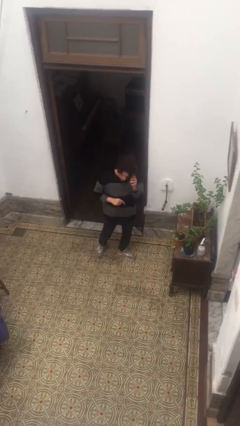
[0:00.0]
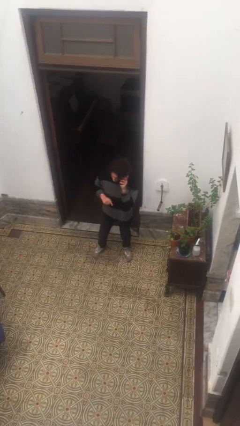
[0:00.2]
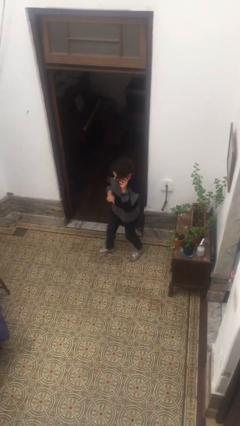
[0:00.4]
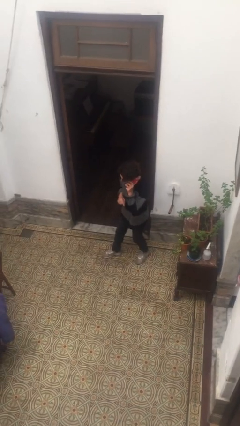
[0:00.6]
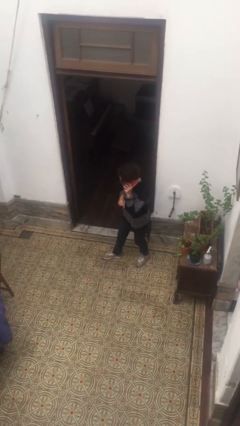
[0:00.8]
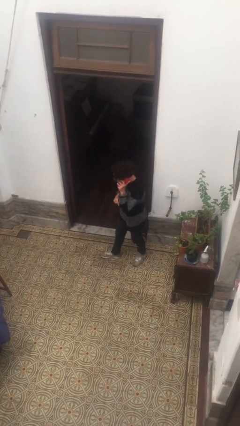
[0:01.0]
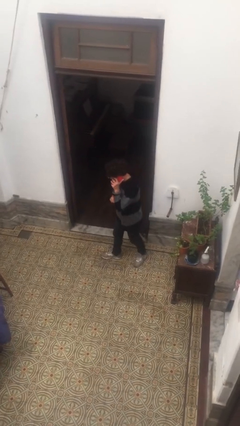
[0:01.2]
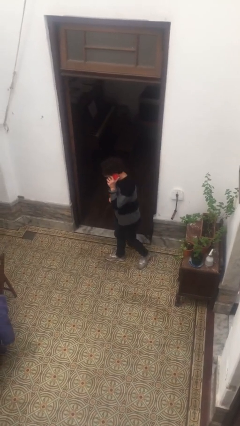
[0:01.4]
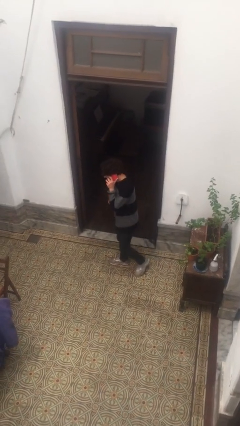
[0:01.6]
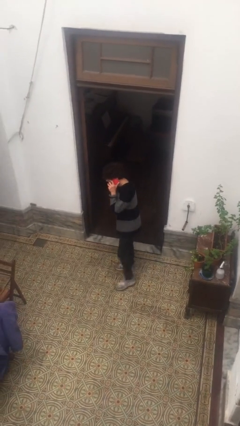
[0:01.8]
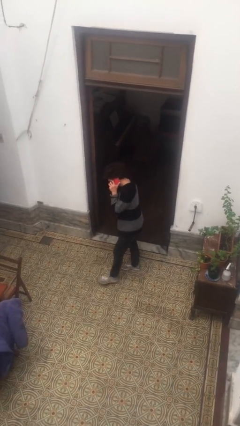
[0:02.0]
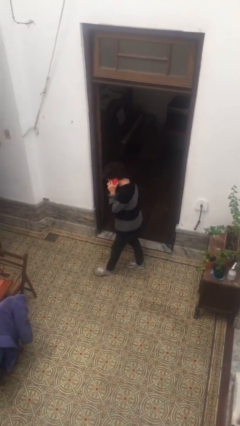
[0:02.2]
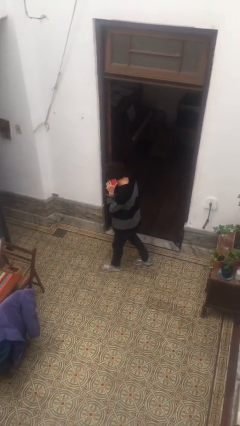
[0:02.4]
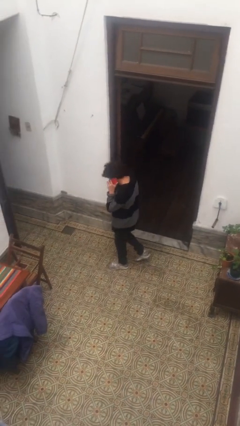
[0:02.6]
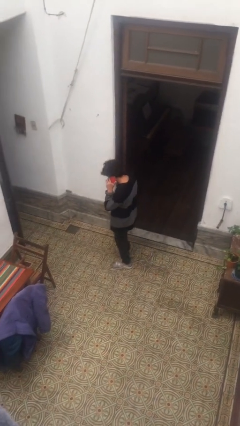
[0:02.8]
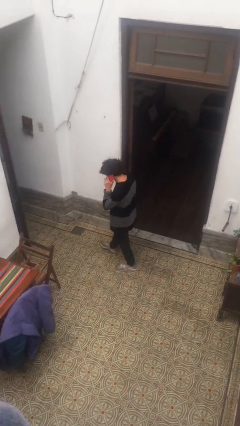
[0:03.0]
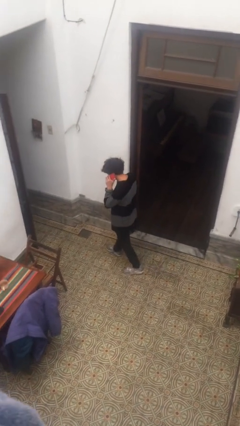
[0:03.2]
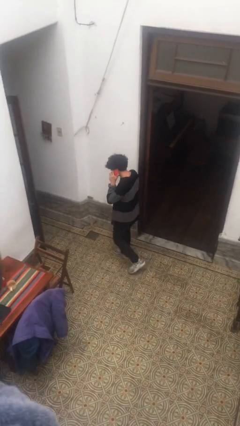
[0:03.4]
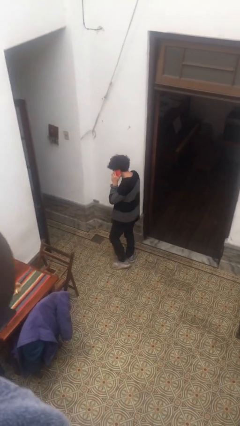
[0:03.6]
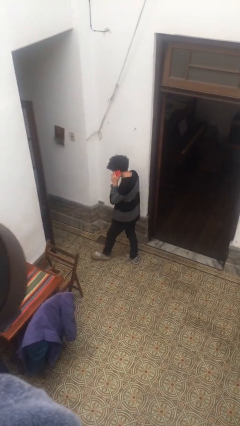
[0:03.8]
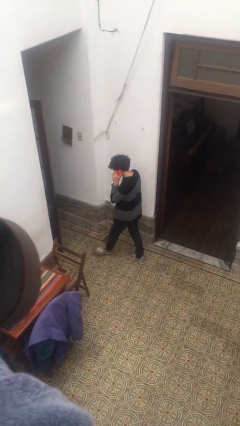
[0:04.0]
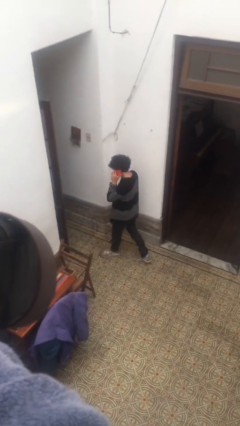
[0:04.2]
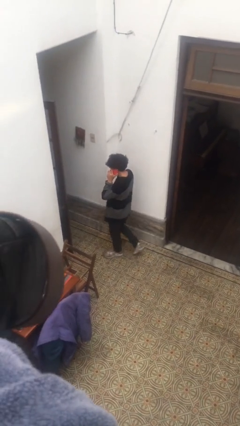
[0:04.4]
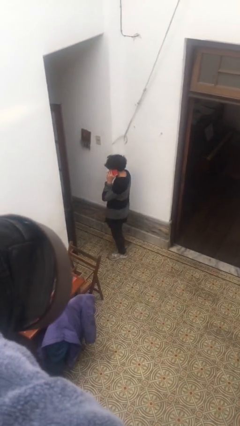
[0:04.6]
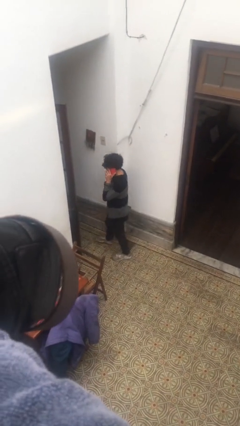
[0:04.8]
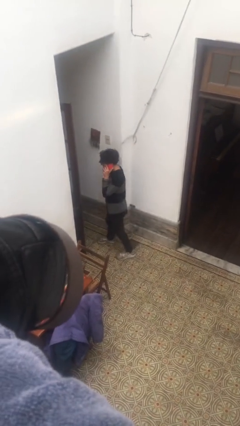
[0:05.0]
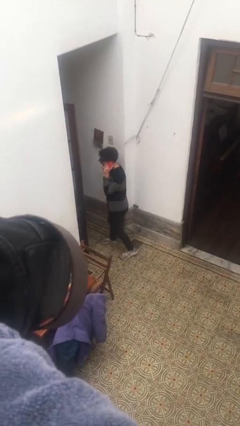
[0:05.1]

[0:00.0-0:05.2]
person talks on phone

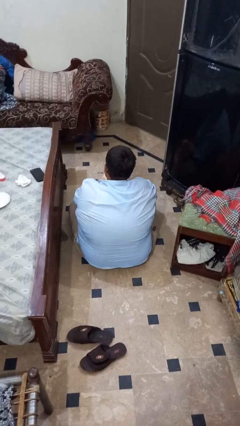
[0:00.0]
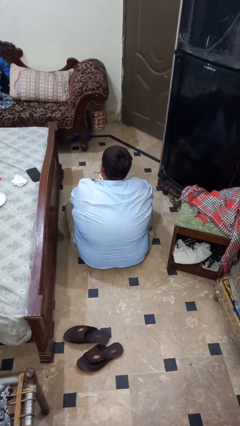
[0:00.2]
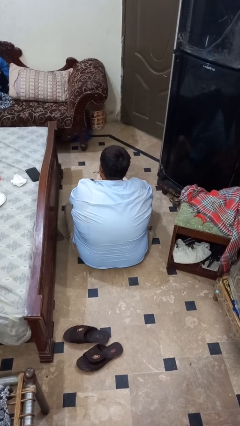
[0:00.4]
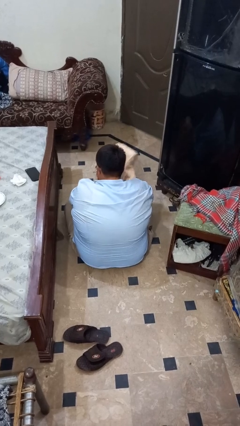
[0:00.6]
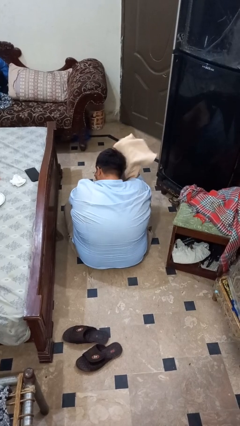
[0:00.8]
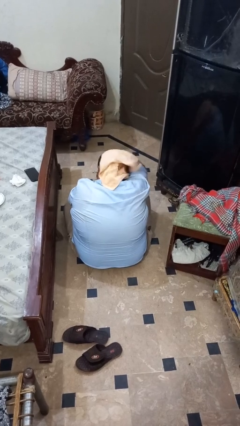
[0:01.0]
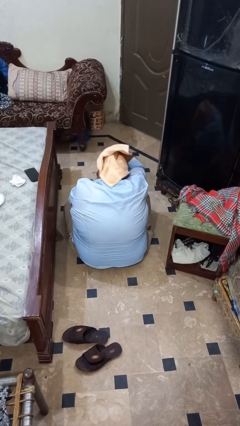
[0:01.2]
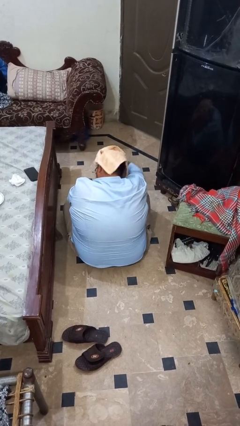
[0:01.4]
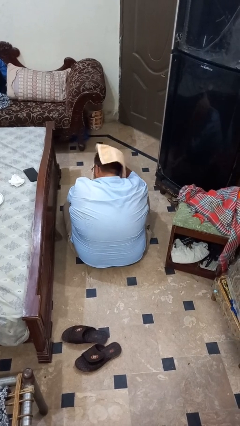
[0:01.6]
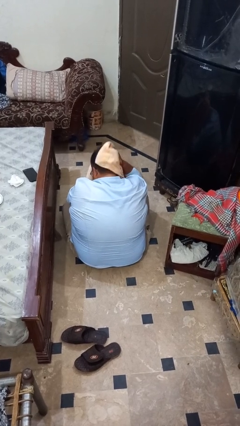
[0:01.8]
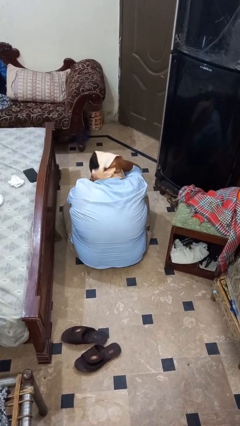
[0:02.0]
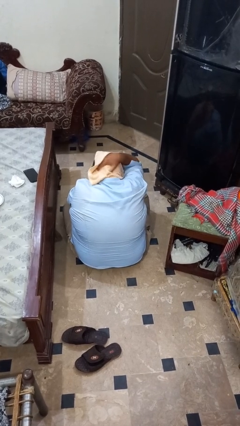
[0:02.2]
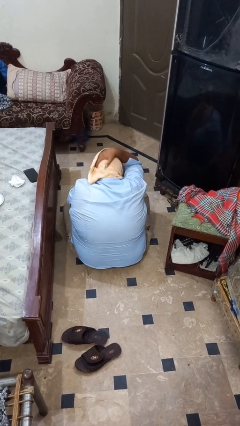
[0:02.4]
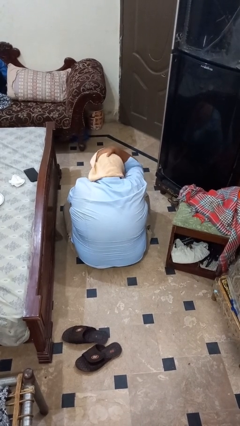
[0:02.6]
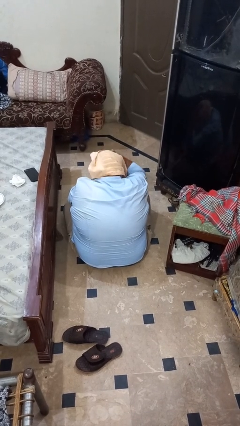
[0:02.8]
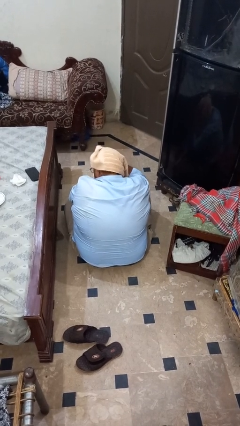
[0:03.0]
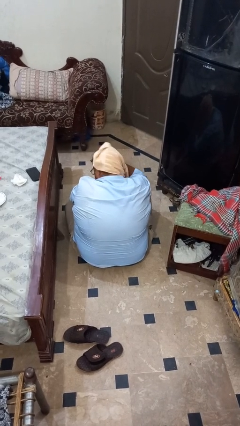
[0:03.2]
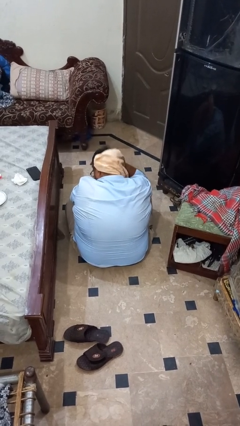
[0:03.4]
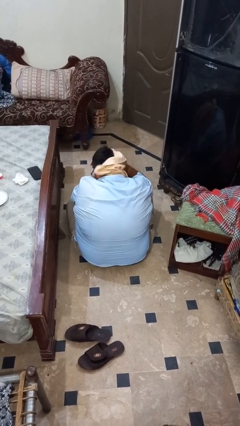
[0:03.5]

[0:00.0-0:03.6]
person dries hair with towel

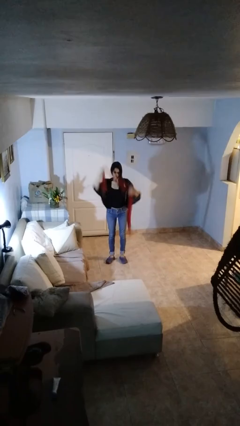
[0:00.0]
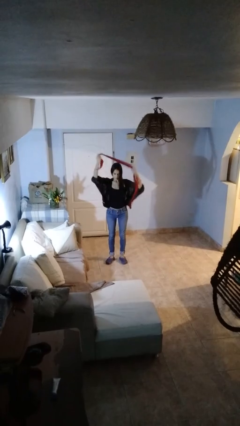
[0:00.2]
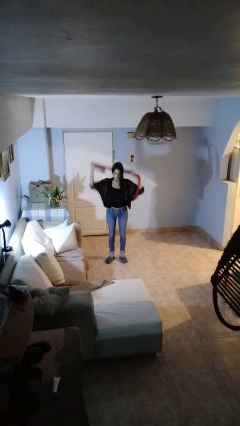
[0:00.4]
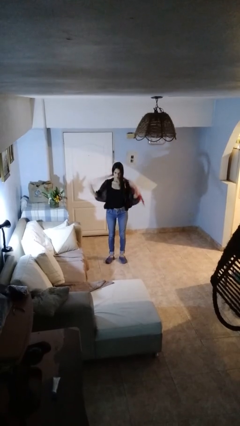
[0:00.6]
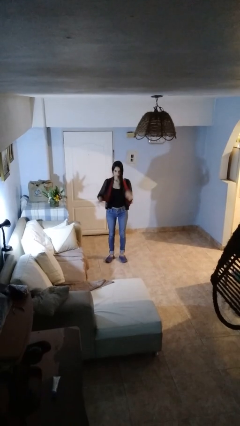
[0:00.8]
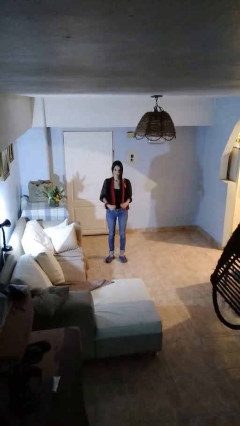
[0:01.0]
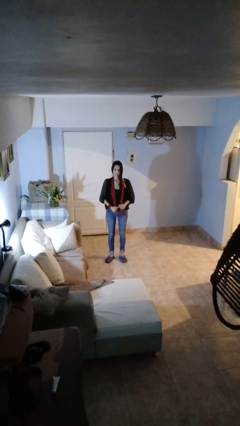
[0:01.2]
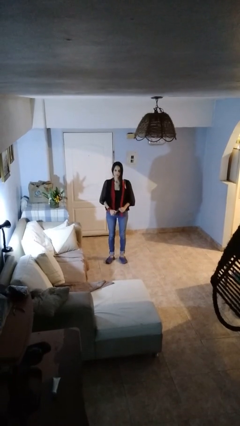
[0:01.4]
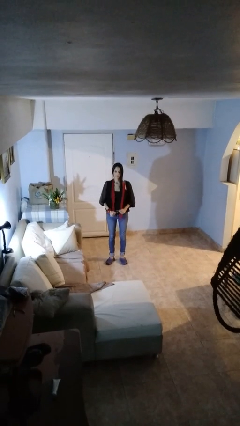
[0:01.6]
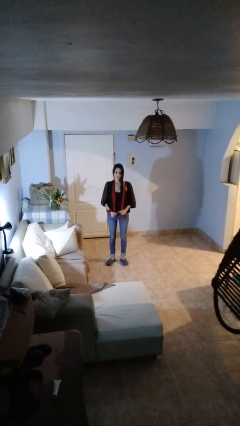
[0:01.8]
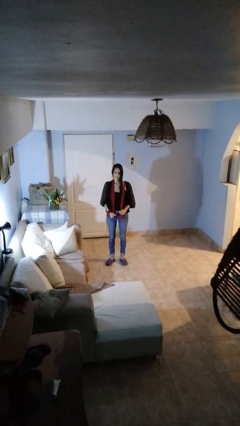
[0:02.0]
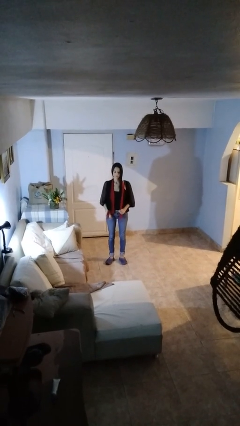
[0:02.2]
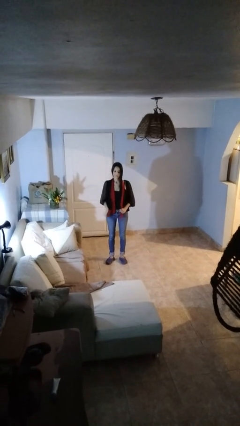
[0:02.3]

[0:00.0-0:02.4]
person puts on scarf

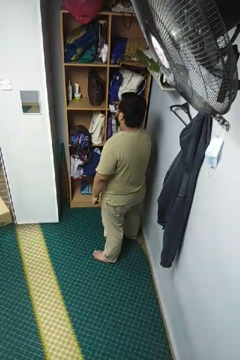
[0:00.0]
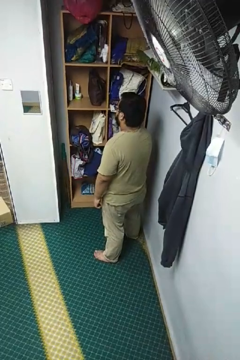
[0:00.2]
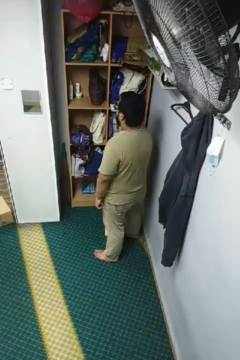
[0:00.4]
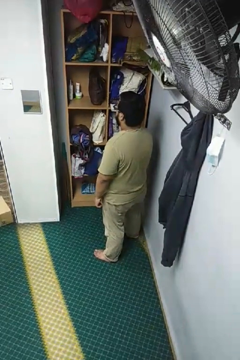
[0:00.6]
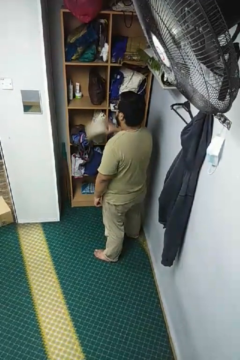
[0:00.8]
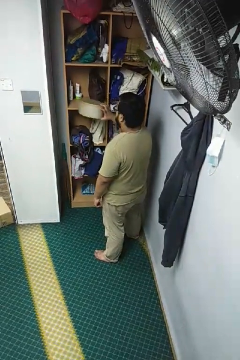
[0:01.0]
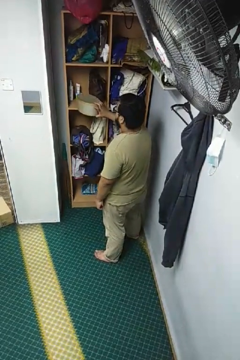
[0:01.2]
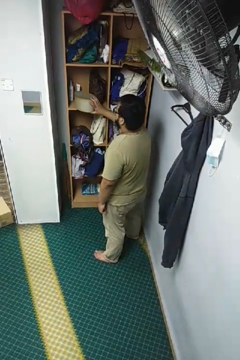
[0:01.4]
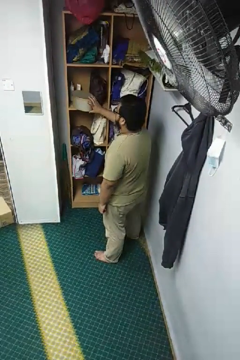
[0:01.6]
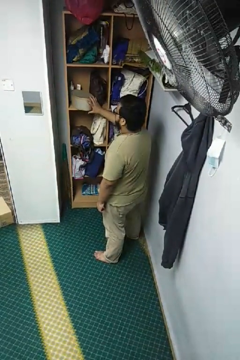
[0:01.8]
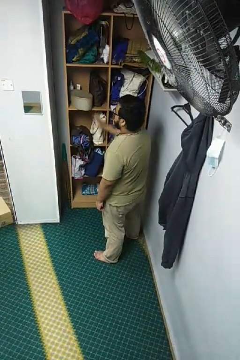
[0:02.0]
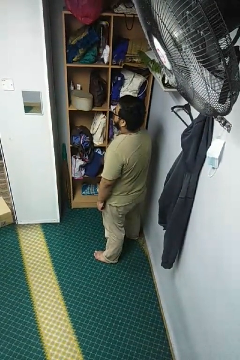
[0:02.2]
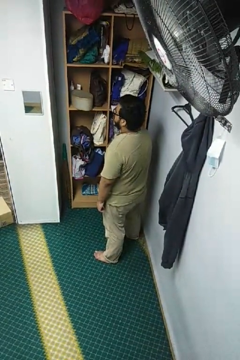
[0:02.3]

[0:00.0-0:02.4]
person puts down object into cabinet

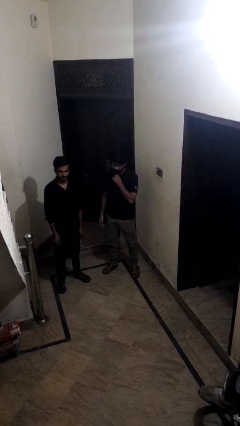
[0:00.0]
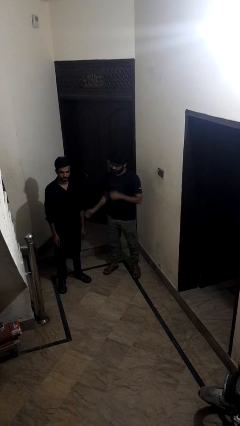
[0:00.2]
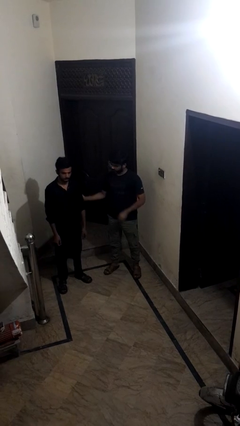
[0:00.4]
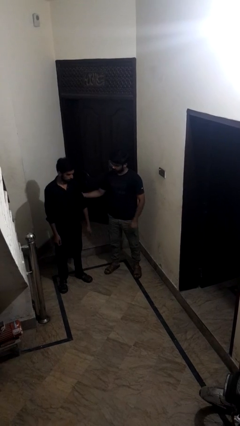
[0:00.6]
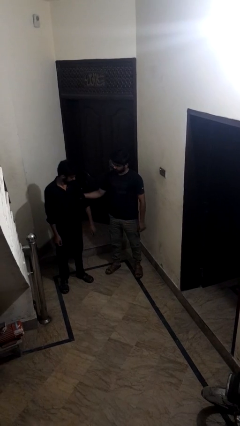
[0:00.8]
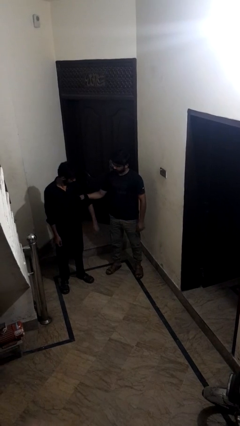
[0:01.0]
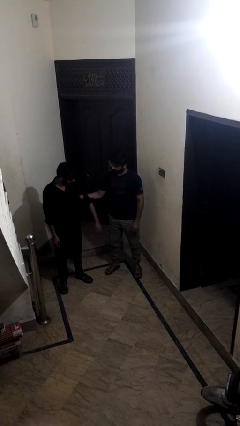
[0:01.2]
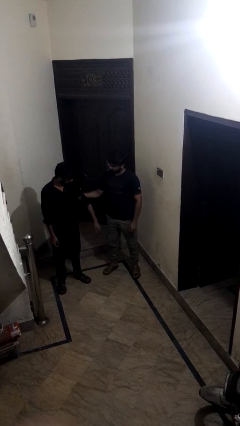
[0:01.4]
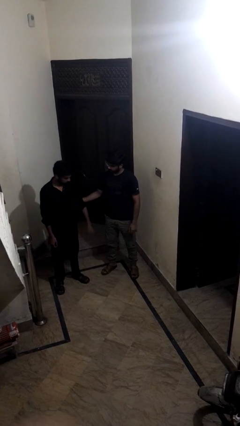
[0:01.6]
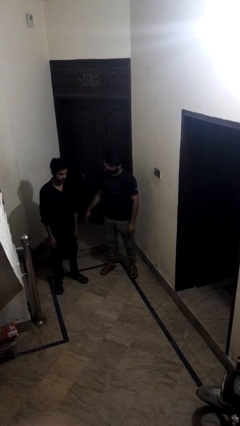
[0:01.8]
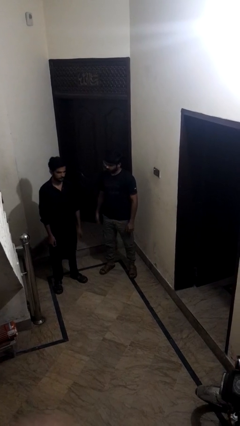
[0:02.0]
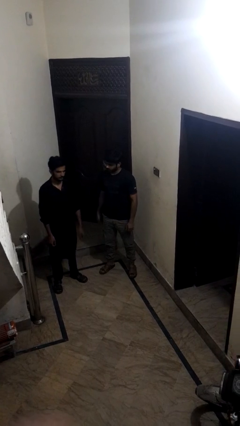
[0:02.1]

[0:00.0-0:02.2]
person grabs person by bicep

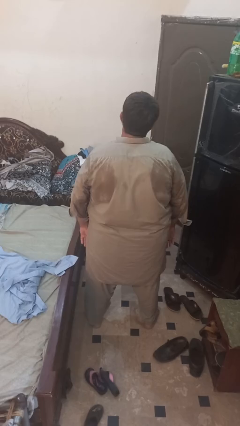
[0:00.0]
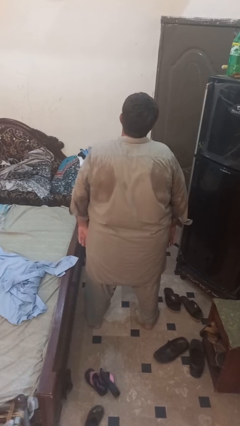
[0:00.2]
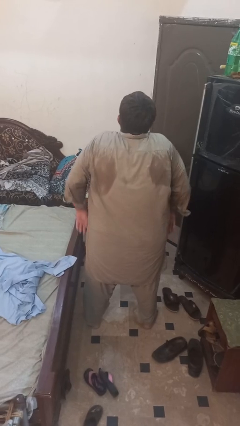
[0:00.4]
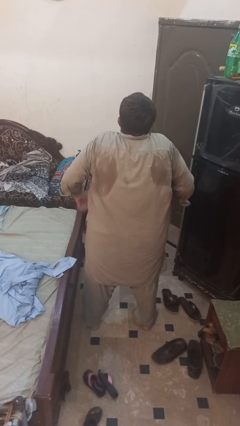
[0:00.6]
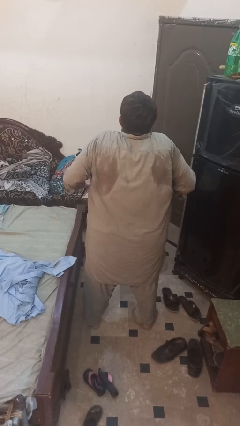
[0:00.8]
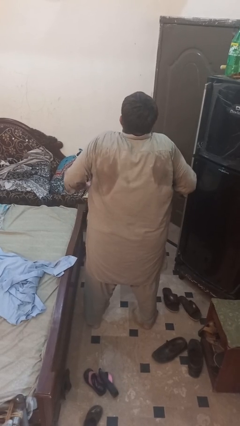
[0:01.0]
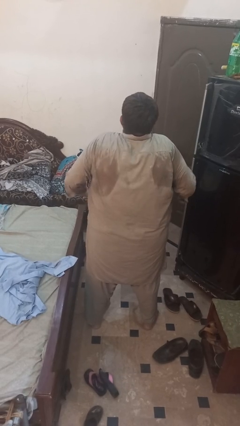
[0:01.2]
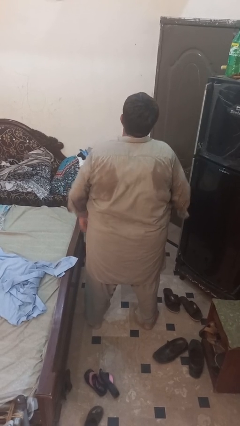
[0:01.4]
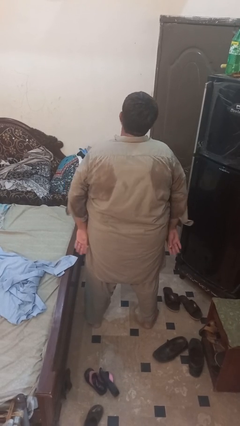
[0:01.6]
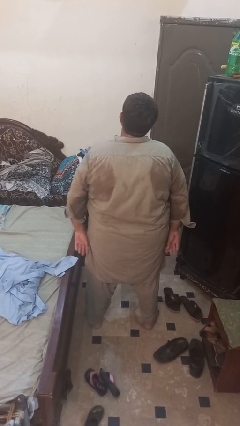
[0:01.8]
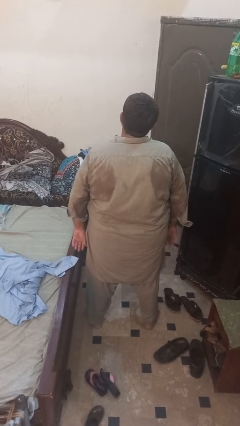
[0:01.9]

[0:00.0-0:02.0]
person shrugs

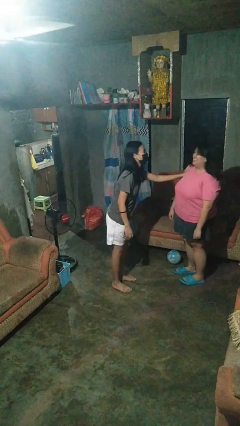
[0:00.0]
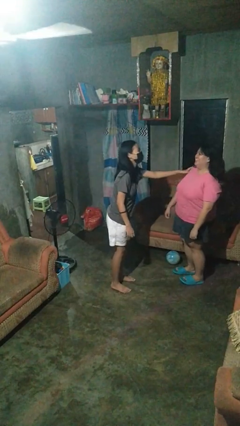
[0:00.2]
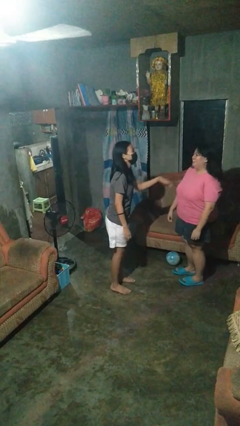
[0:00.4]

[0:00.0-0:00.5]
person shoves person
